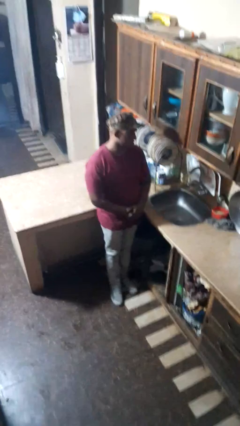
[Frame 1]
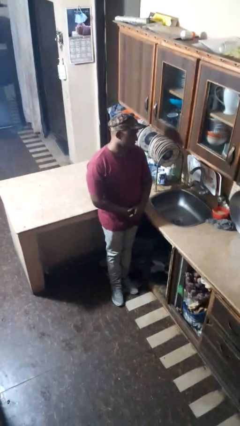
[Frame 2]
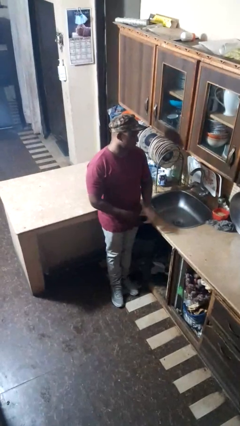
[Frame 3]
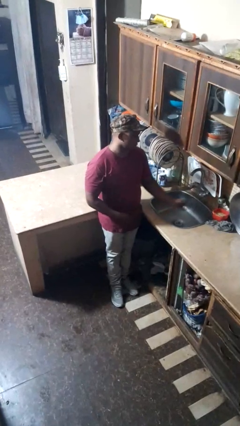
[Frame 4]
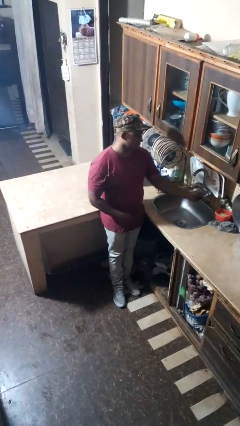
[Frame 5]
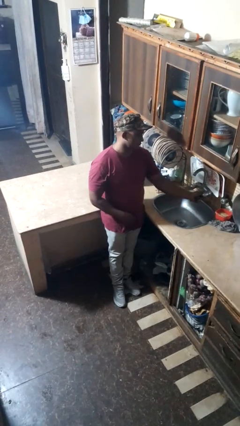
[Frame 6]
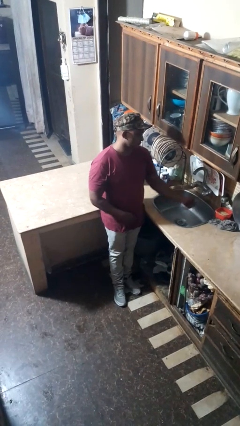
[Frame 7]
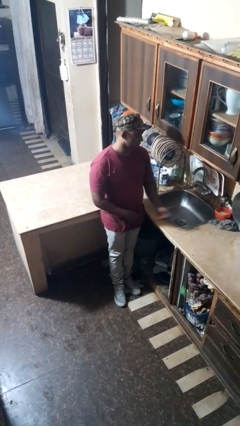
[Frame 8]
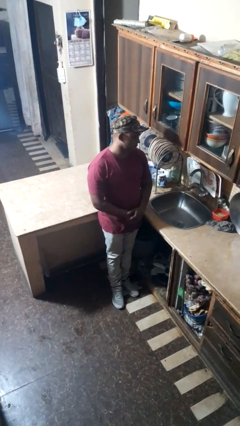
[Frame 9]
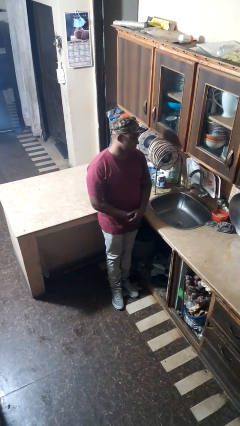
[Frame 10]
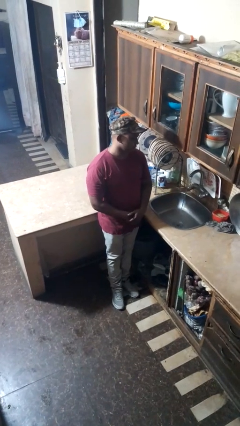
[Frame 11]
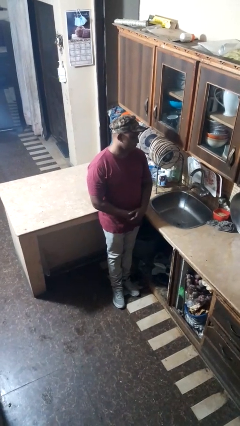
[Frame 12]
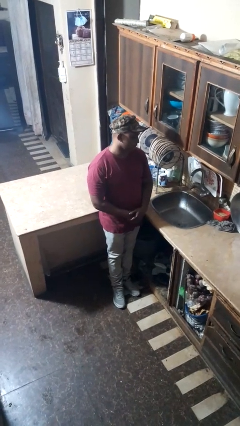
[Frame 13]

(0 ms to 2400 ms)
person turns on faucet

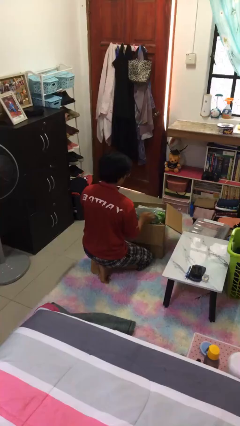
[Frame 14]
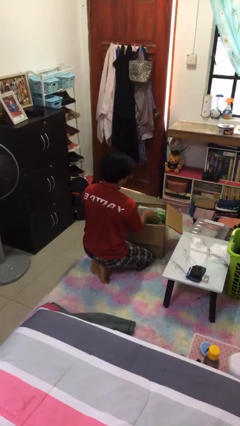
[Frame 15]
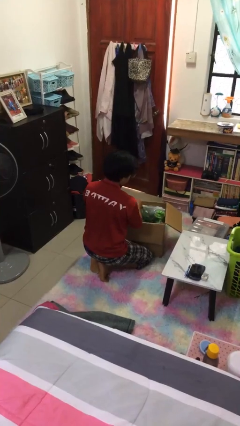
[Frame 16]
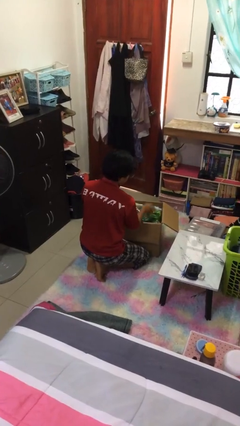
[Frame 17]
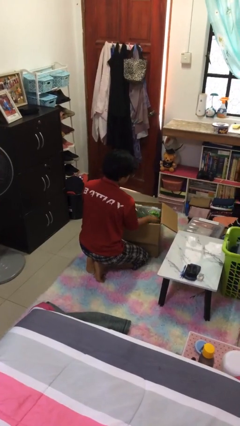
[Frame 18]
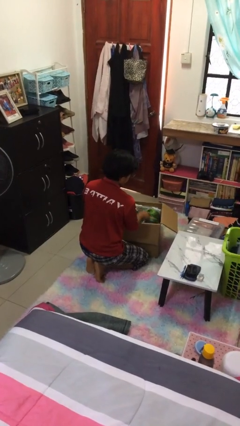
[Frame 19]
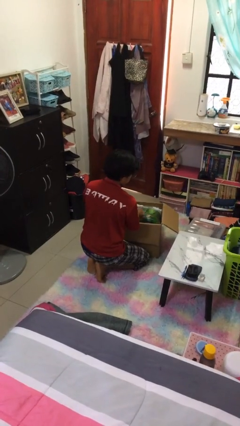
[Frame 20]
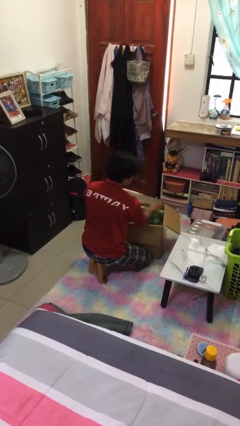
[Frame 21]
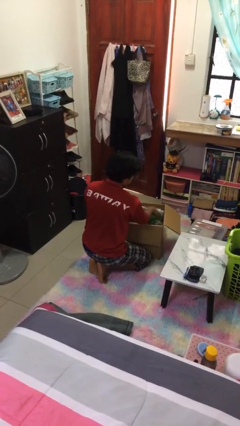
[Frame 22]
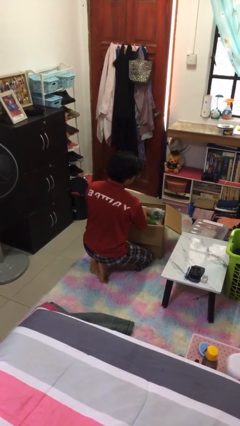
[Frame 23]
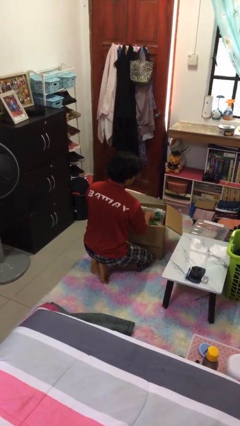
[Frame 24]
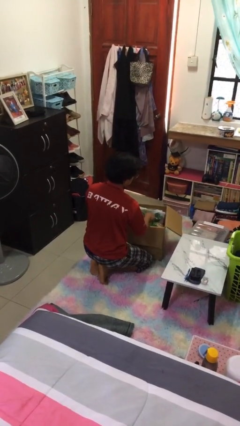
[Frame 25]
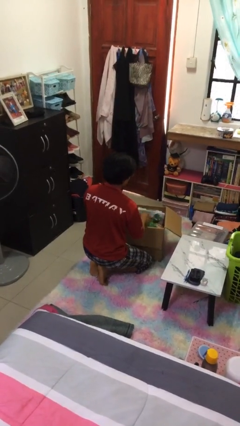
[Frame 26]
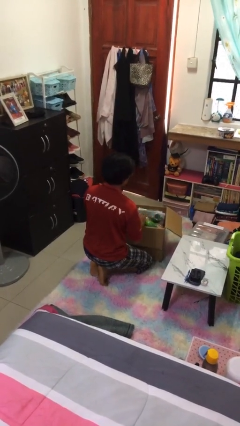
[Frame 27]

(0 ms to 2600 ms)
person searches in box

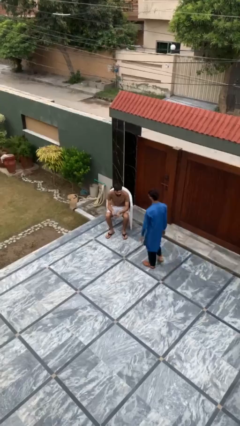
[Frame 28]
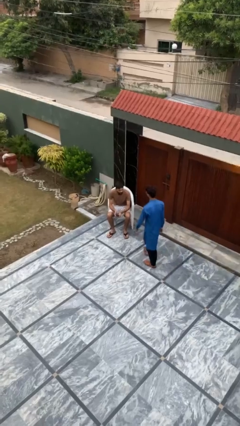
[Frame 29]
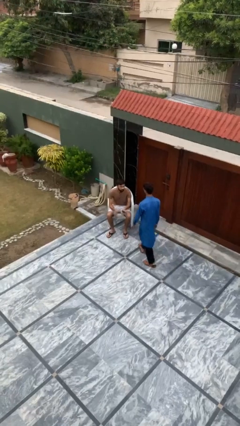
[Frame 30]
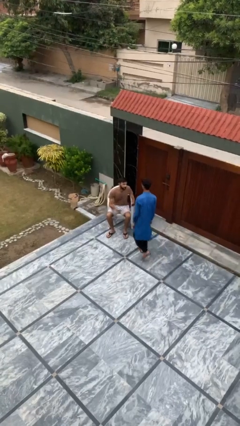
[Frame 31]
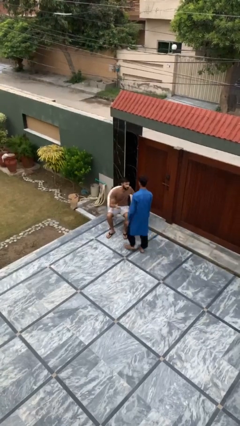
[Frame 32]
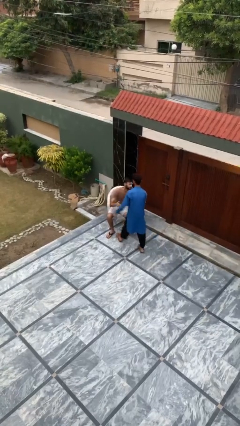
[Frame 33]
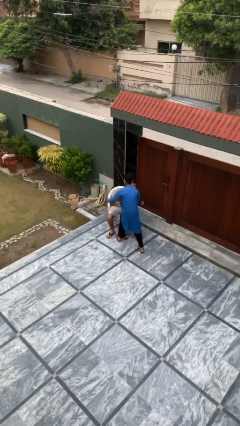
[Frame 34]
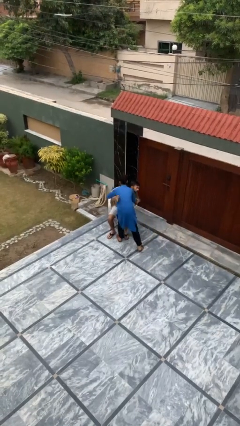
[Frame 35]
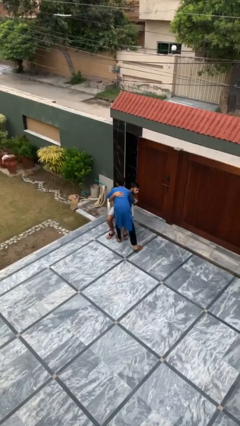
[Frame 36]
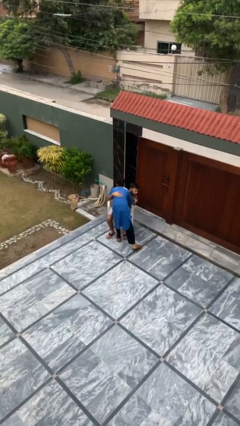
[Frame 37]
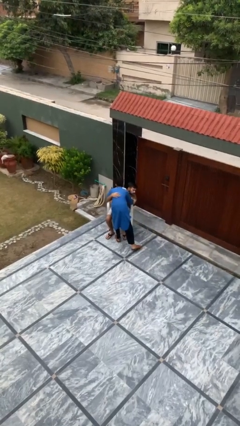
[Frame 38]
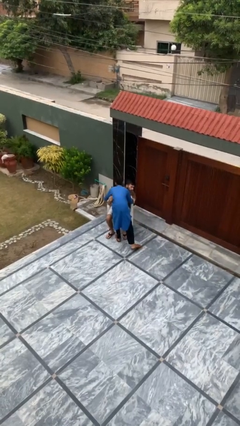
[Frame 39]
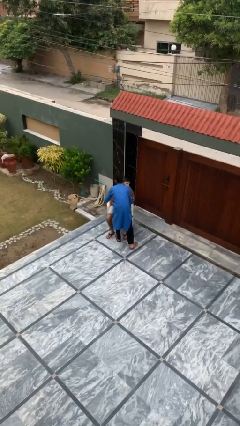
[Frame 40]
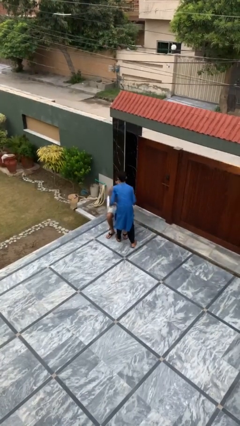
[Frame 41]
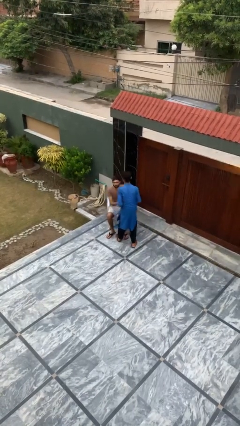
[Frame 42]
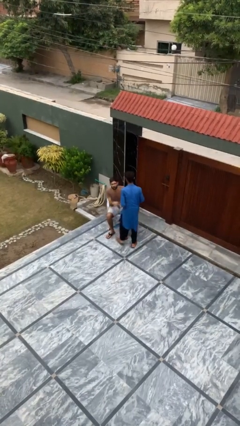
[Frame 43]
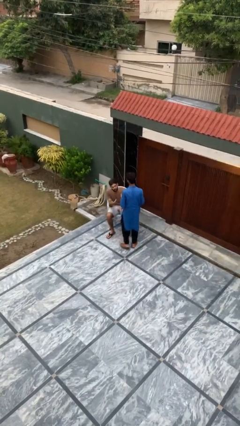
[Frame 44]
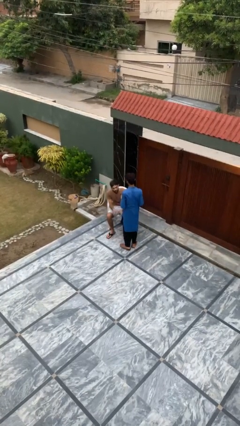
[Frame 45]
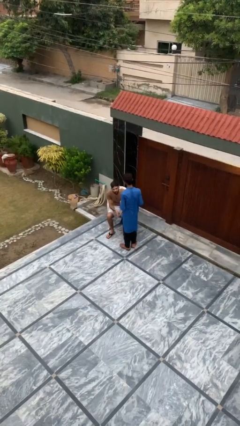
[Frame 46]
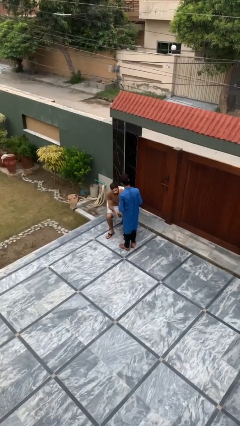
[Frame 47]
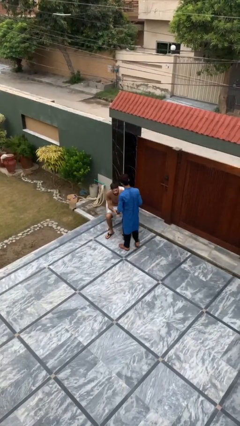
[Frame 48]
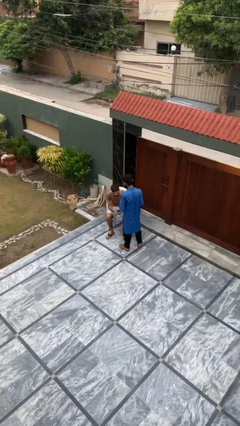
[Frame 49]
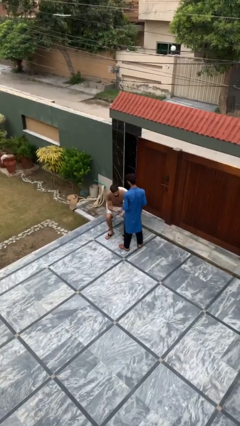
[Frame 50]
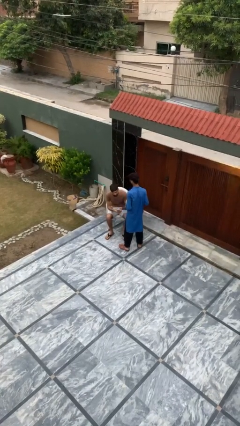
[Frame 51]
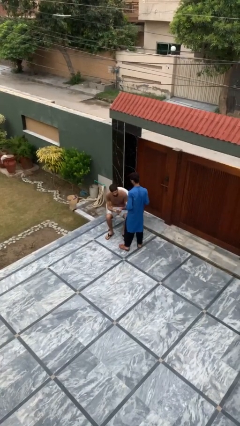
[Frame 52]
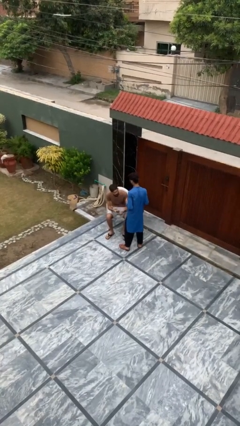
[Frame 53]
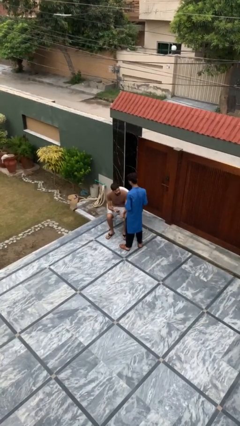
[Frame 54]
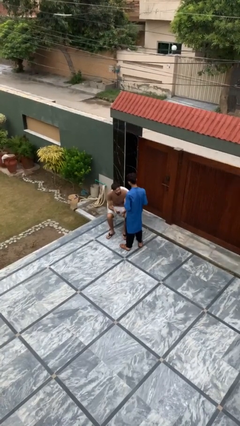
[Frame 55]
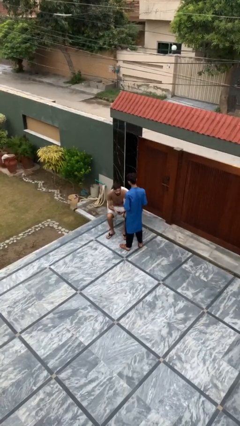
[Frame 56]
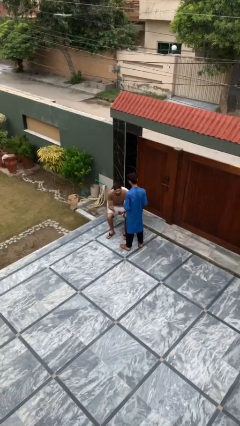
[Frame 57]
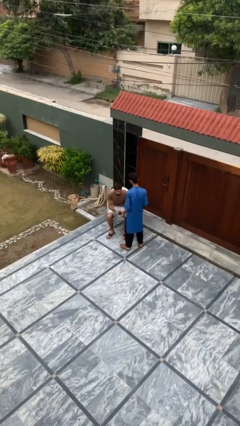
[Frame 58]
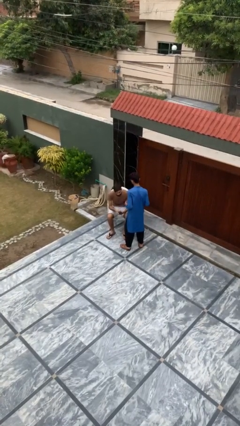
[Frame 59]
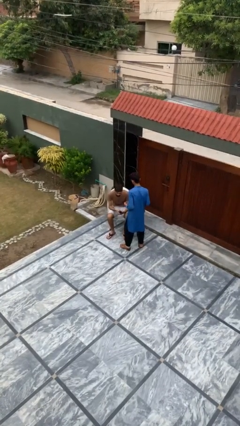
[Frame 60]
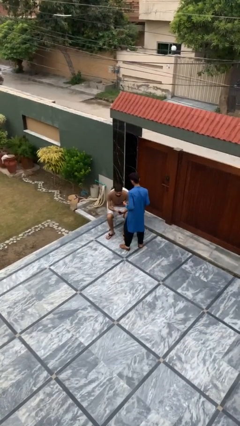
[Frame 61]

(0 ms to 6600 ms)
person embraces person

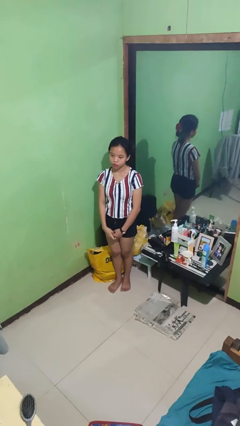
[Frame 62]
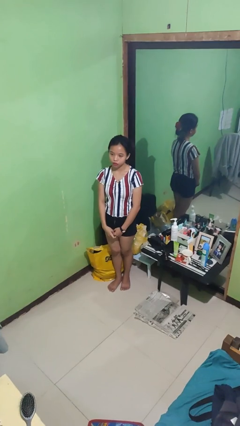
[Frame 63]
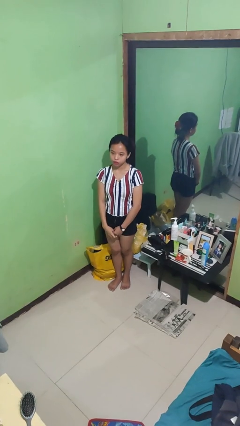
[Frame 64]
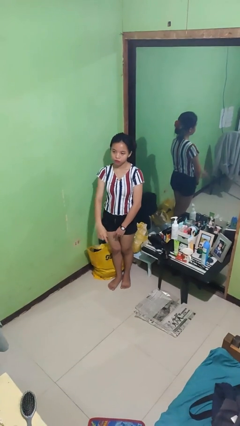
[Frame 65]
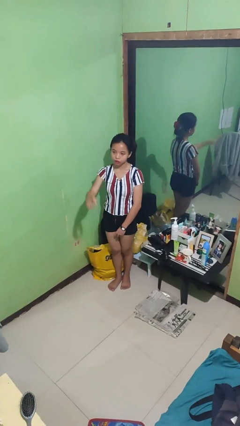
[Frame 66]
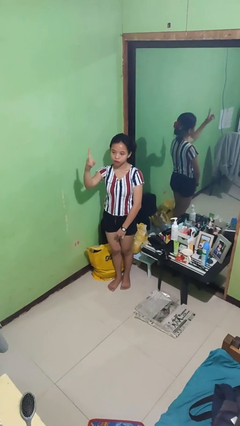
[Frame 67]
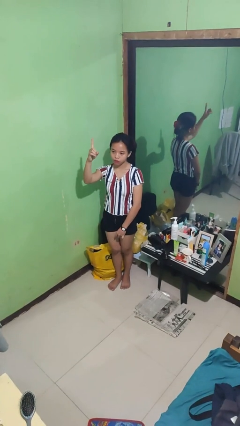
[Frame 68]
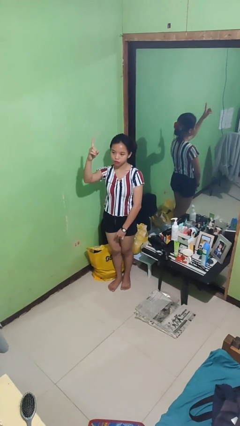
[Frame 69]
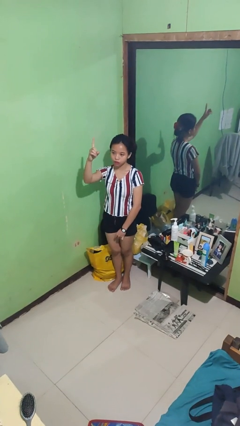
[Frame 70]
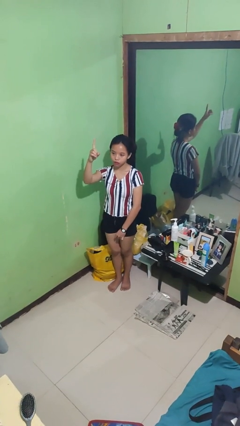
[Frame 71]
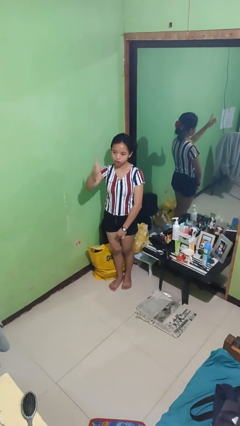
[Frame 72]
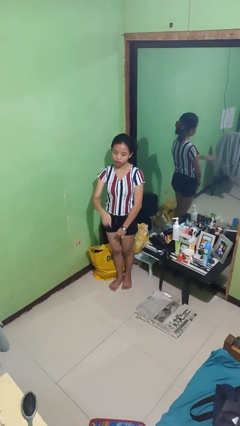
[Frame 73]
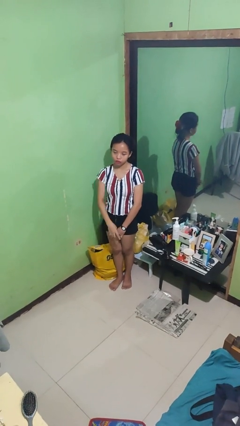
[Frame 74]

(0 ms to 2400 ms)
person gestures number one

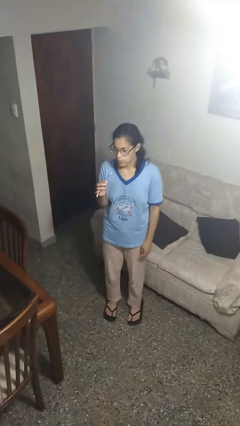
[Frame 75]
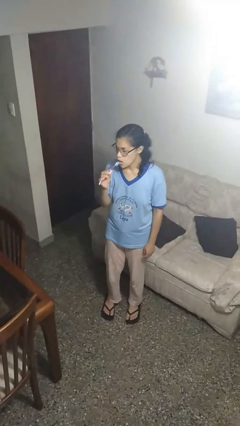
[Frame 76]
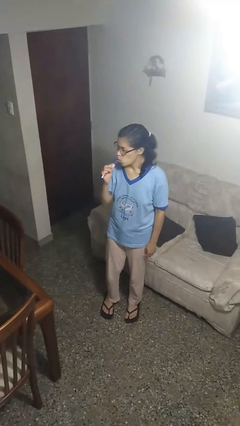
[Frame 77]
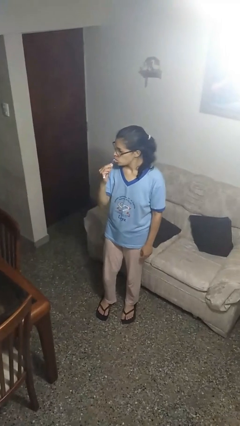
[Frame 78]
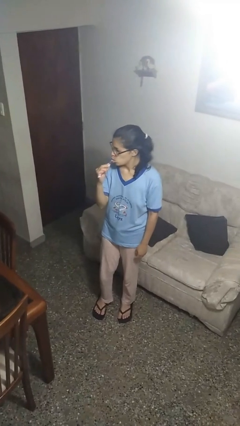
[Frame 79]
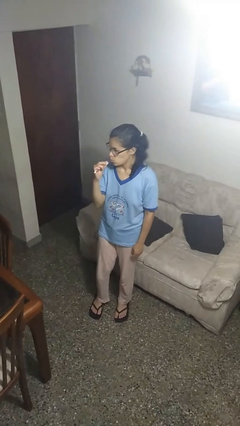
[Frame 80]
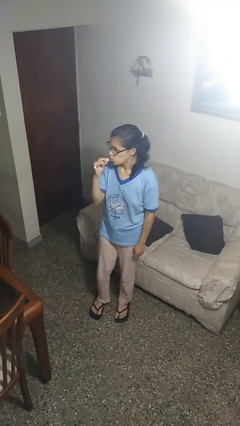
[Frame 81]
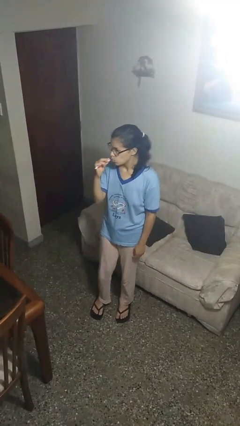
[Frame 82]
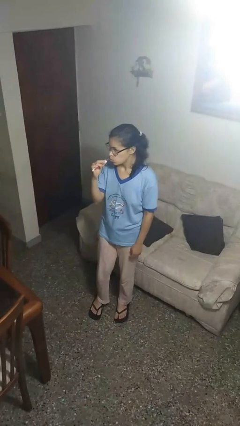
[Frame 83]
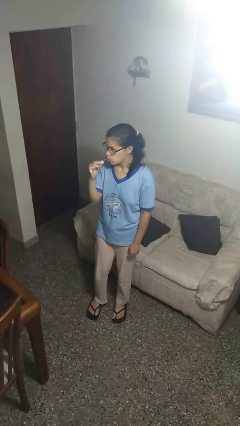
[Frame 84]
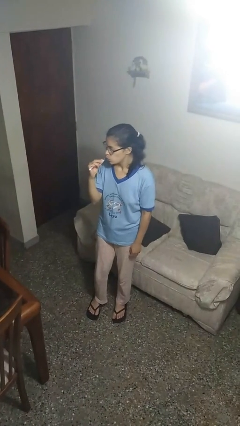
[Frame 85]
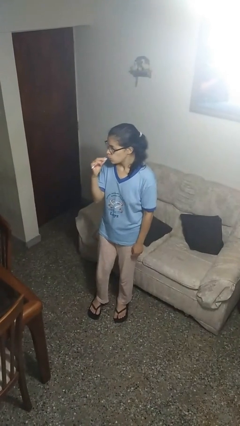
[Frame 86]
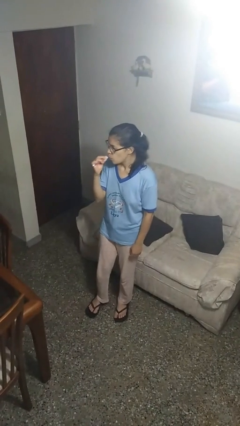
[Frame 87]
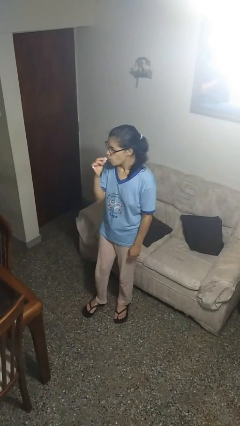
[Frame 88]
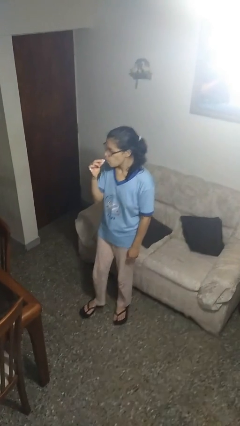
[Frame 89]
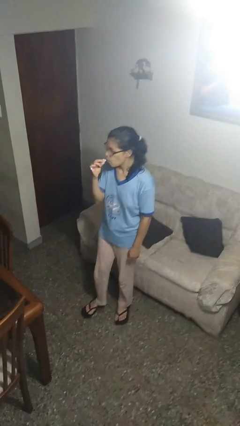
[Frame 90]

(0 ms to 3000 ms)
person brushes teeth

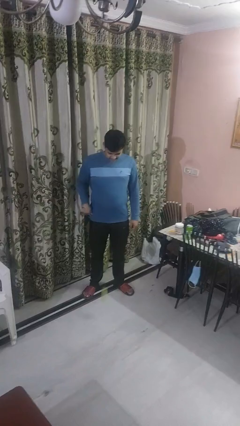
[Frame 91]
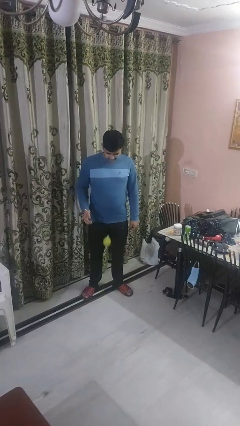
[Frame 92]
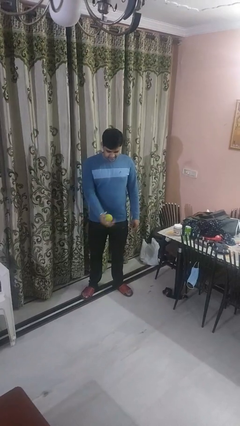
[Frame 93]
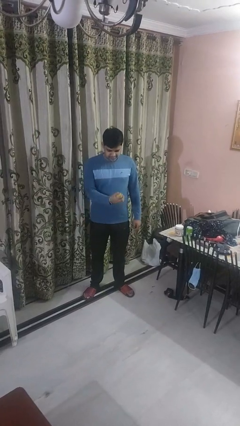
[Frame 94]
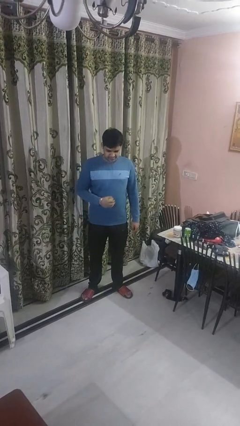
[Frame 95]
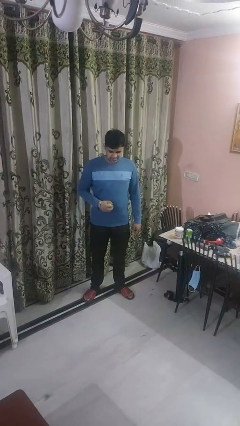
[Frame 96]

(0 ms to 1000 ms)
person bounces ball on floor
